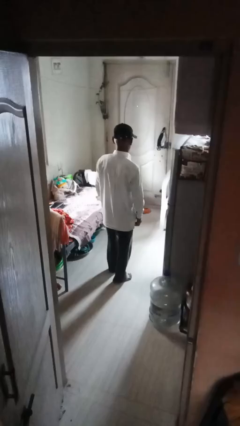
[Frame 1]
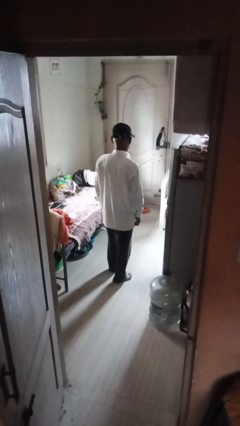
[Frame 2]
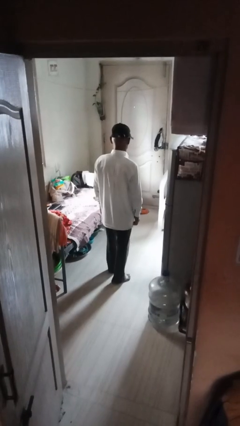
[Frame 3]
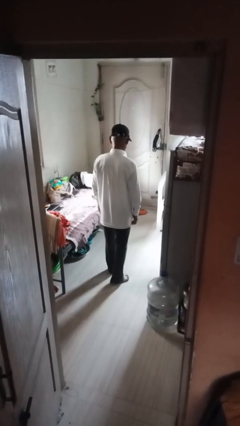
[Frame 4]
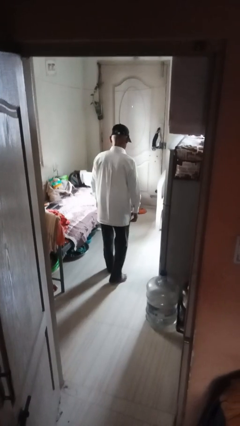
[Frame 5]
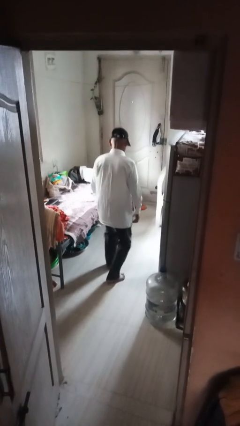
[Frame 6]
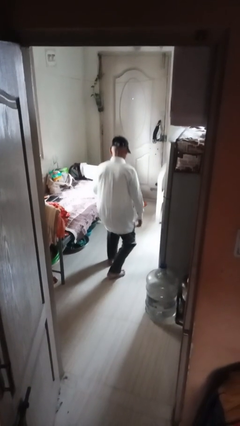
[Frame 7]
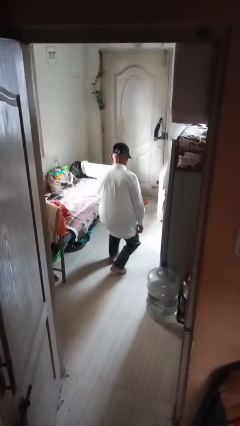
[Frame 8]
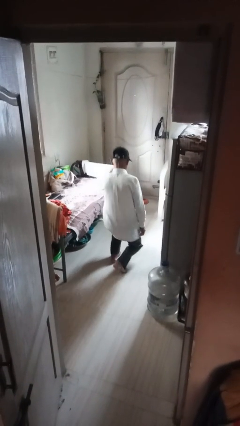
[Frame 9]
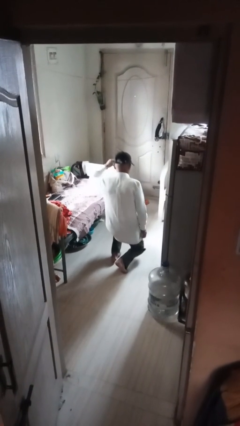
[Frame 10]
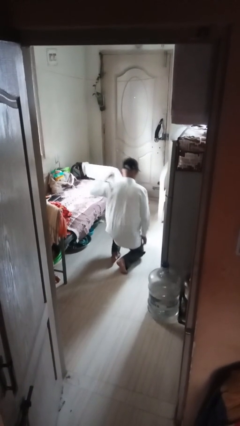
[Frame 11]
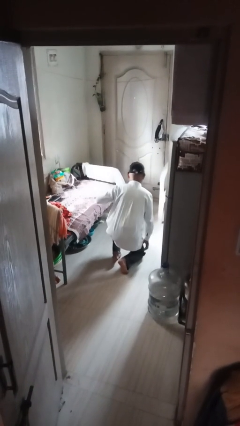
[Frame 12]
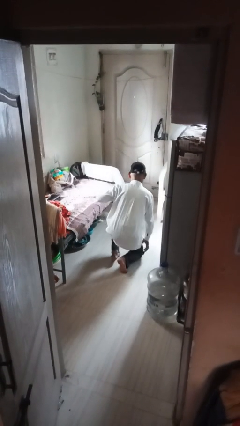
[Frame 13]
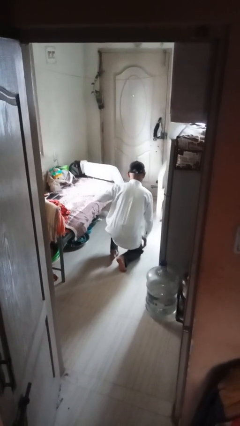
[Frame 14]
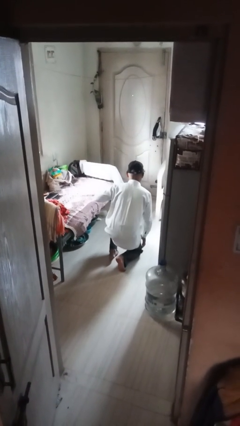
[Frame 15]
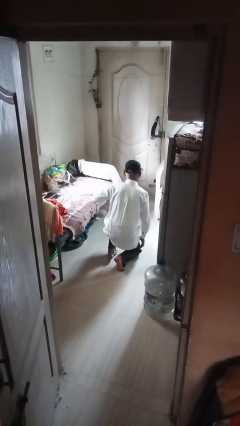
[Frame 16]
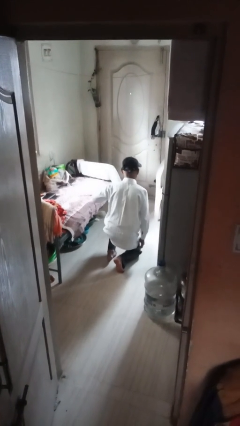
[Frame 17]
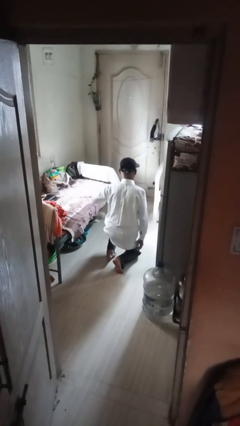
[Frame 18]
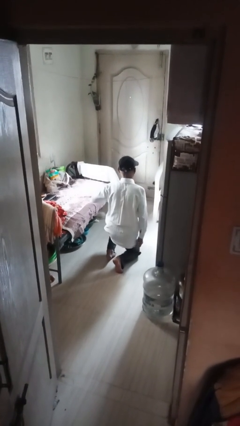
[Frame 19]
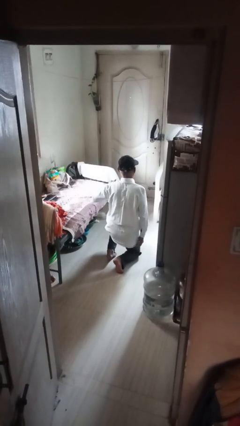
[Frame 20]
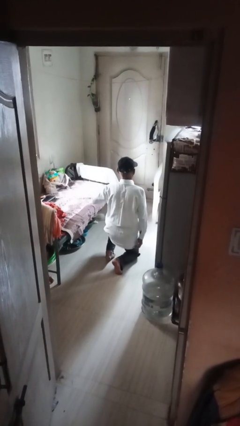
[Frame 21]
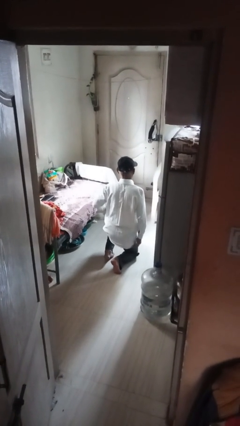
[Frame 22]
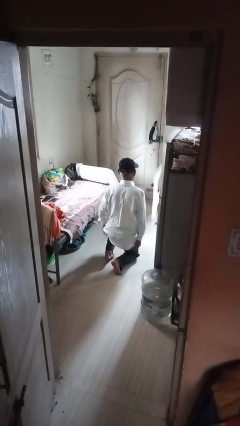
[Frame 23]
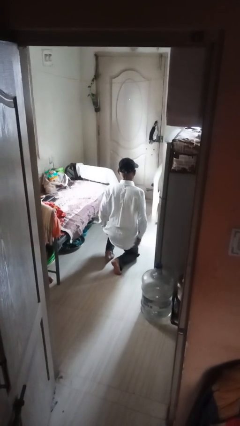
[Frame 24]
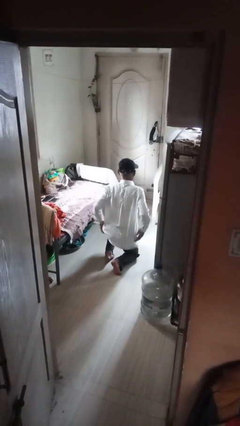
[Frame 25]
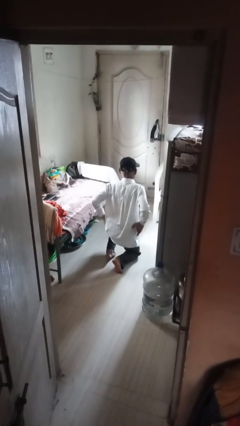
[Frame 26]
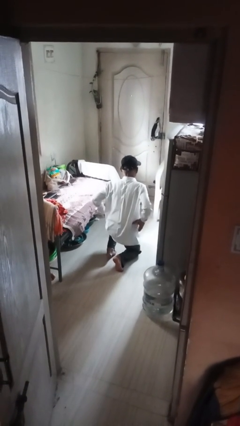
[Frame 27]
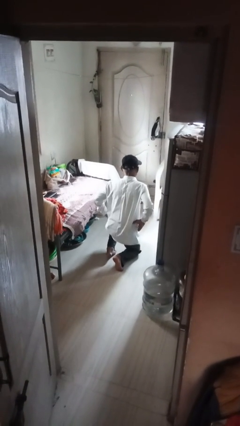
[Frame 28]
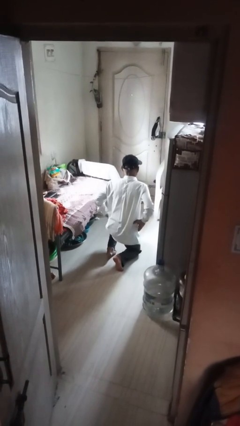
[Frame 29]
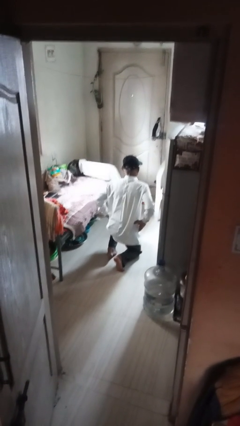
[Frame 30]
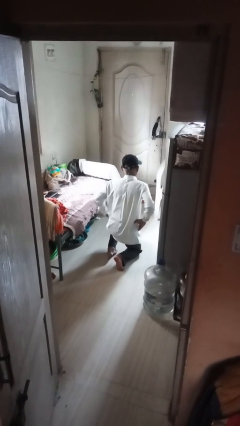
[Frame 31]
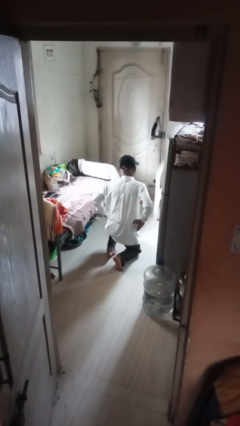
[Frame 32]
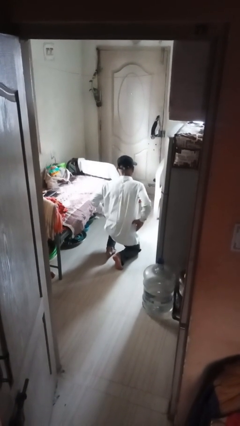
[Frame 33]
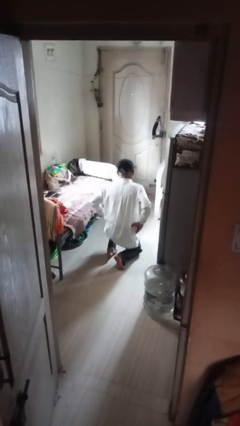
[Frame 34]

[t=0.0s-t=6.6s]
person exercises with lunges

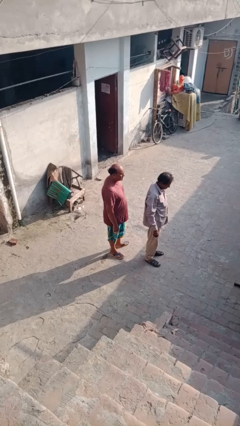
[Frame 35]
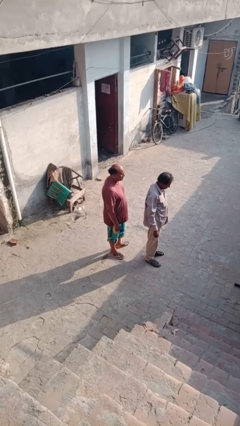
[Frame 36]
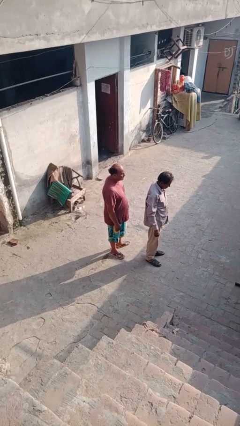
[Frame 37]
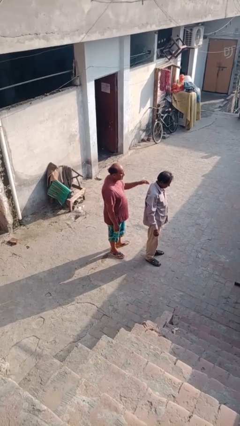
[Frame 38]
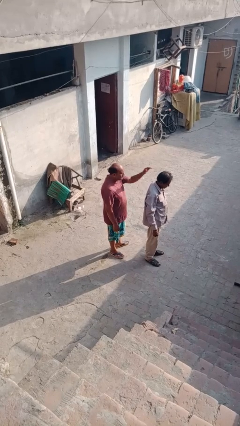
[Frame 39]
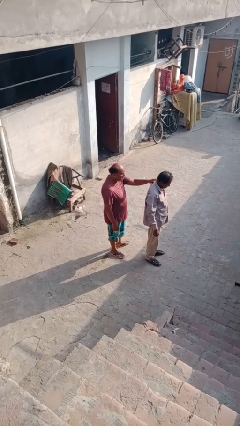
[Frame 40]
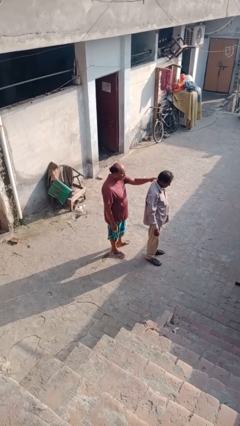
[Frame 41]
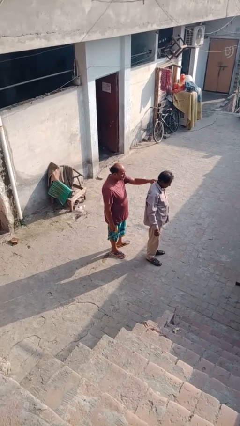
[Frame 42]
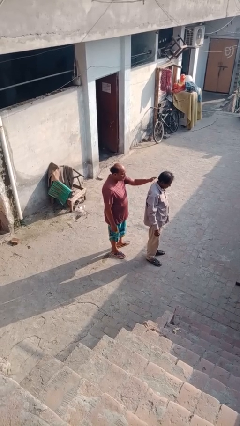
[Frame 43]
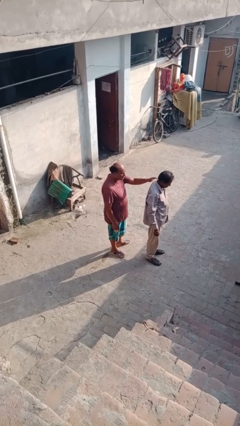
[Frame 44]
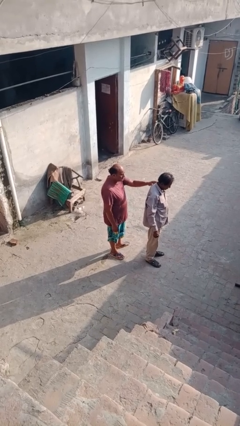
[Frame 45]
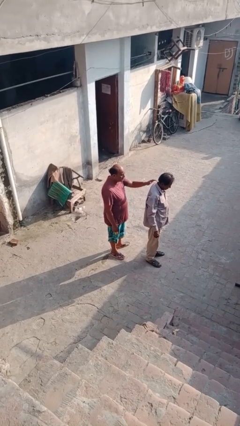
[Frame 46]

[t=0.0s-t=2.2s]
person touches back of person

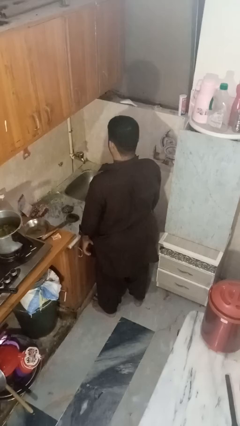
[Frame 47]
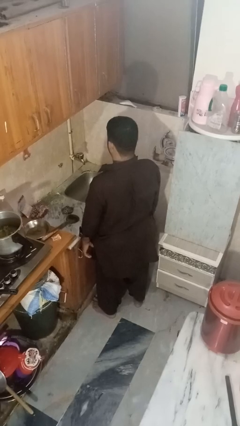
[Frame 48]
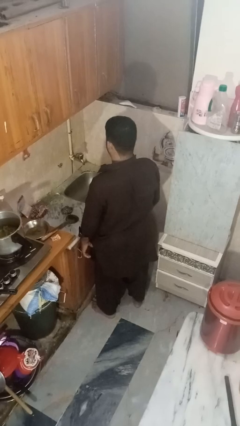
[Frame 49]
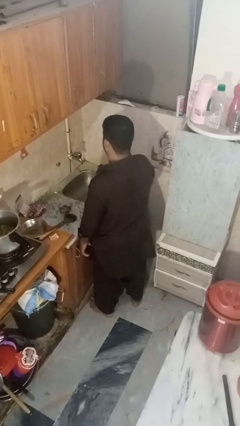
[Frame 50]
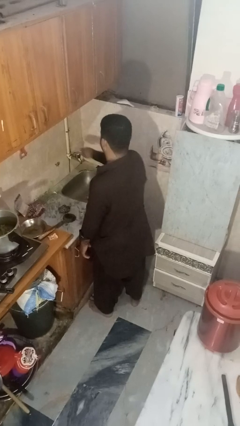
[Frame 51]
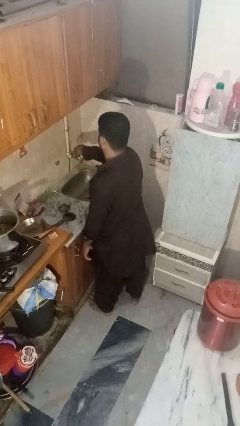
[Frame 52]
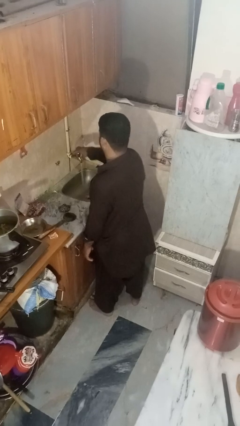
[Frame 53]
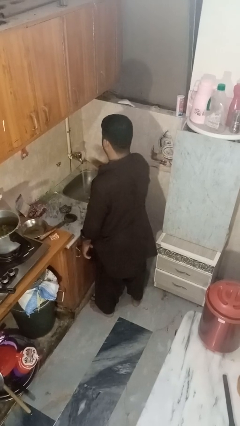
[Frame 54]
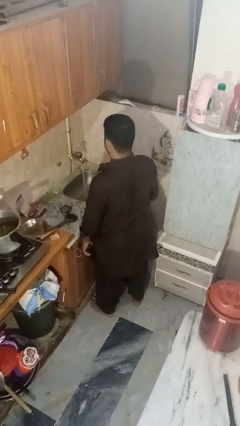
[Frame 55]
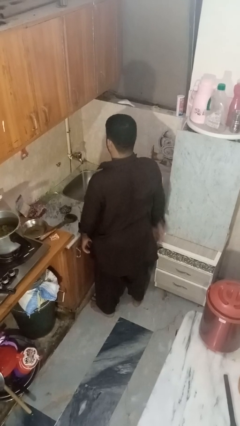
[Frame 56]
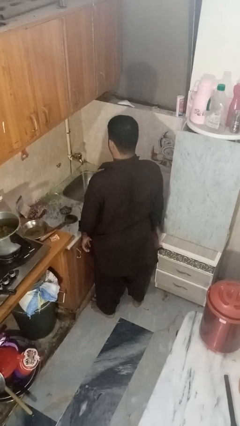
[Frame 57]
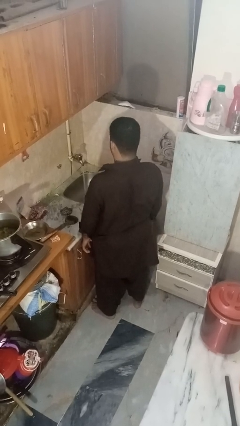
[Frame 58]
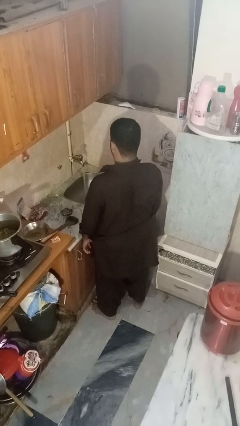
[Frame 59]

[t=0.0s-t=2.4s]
person turns on faucet

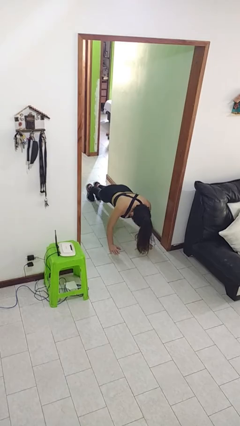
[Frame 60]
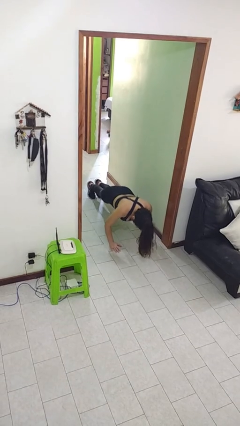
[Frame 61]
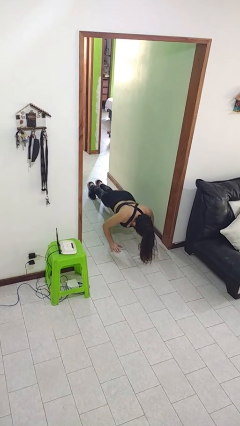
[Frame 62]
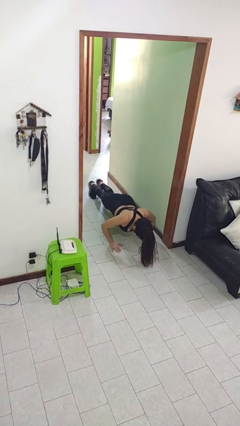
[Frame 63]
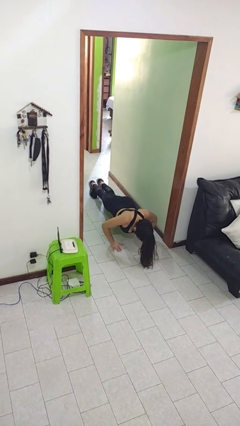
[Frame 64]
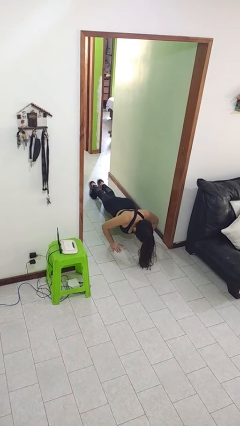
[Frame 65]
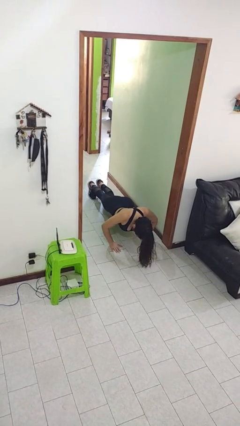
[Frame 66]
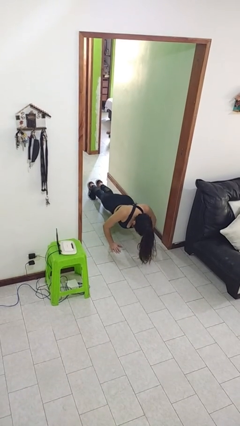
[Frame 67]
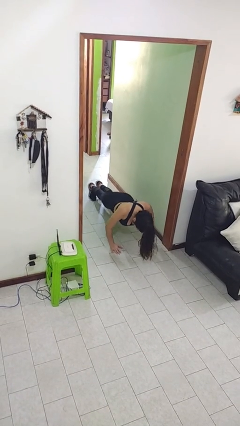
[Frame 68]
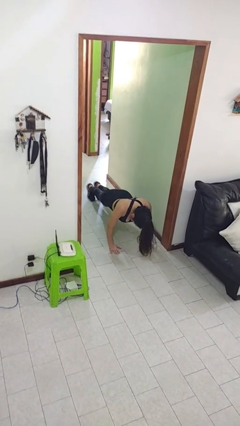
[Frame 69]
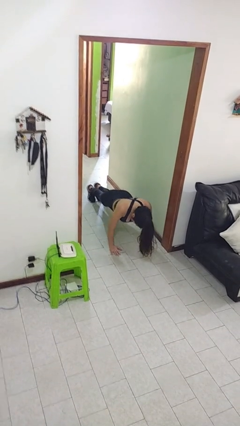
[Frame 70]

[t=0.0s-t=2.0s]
person exercises with pushup

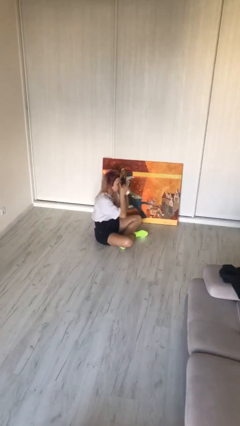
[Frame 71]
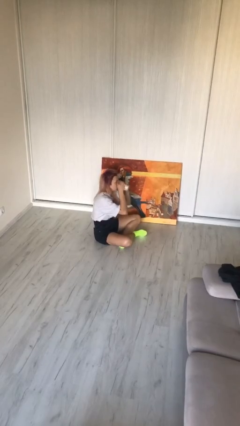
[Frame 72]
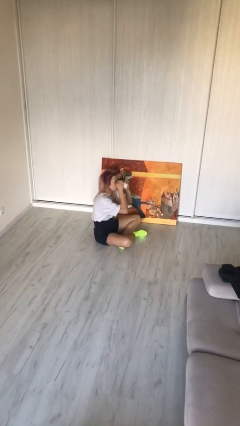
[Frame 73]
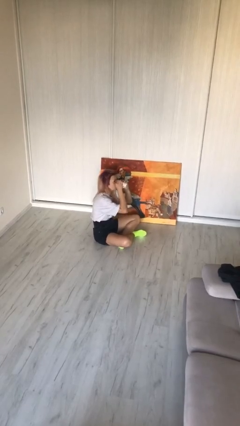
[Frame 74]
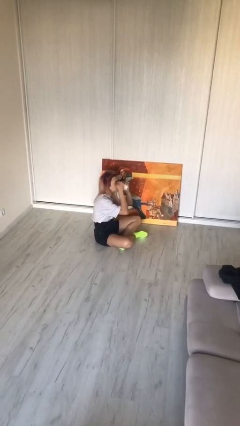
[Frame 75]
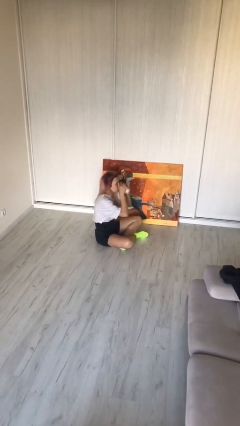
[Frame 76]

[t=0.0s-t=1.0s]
person drinks from mug

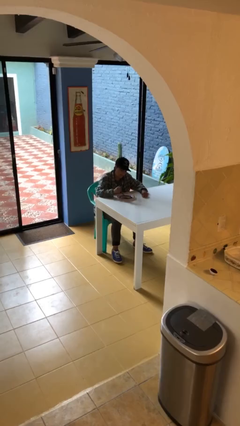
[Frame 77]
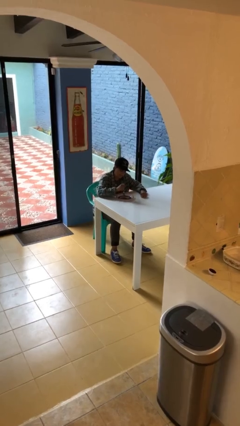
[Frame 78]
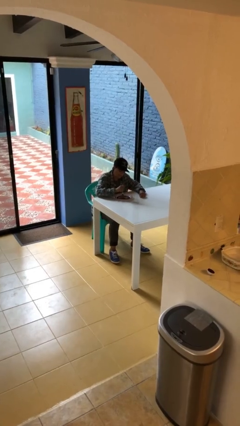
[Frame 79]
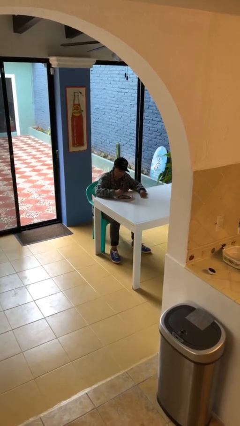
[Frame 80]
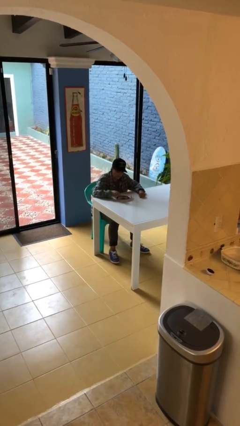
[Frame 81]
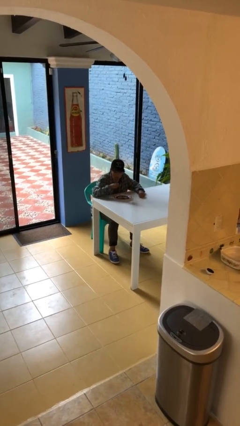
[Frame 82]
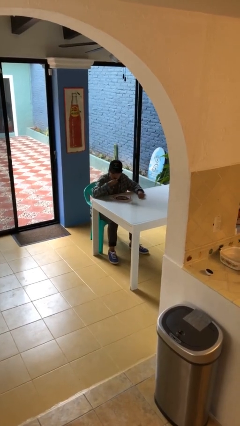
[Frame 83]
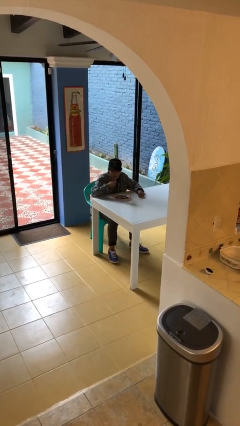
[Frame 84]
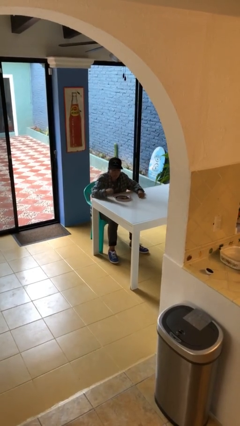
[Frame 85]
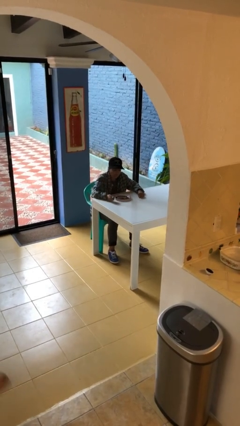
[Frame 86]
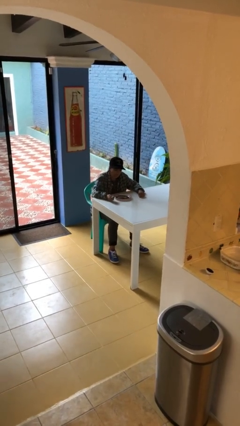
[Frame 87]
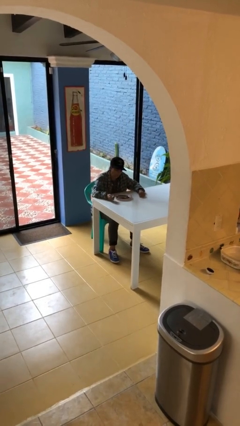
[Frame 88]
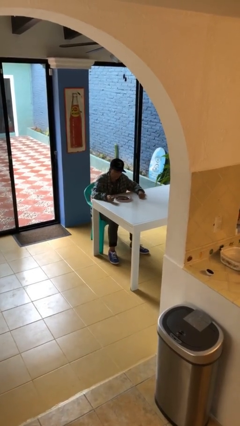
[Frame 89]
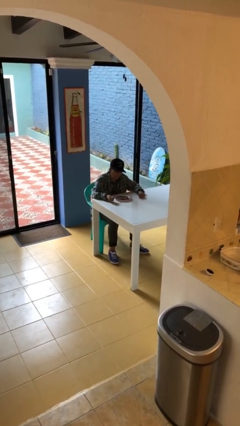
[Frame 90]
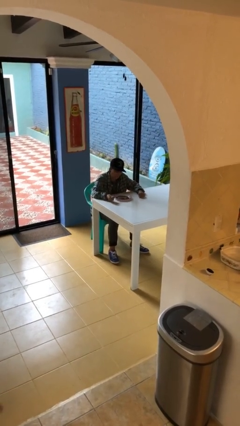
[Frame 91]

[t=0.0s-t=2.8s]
person eats with utensil
